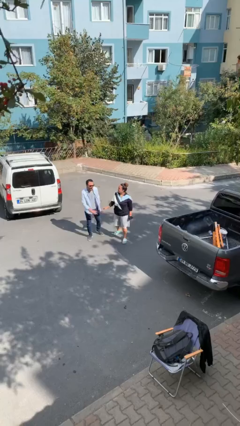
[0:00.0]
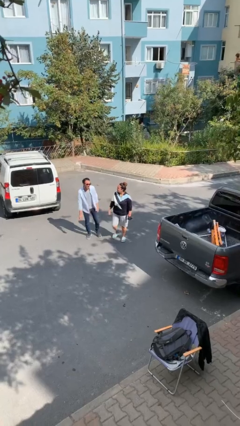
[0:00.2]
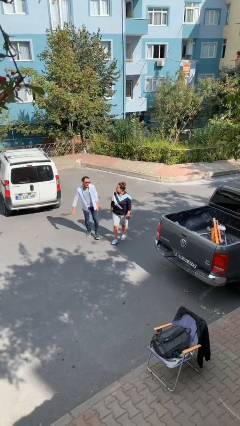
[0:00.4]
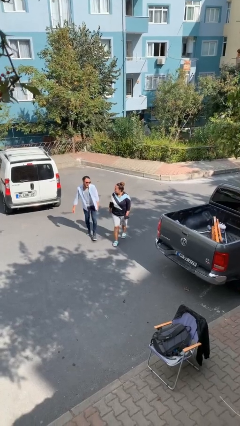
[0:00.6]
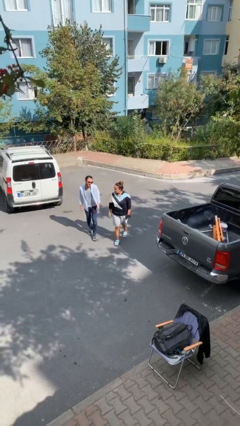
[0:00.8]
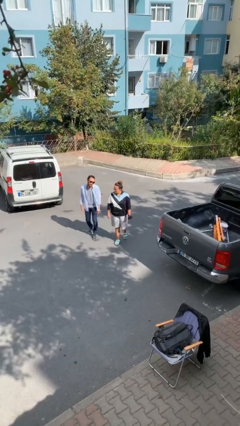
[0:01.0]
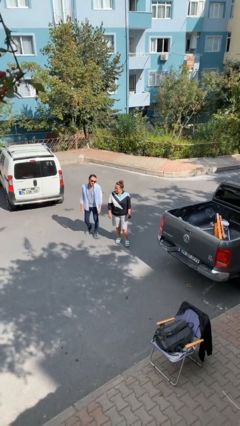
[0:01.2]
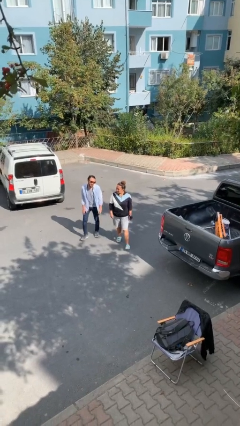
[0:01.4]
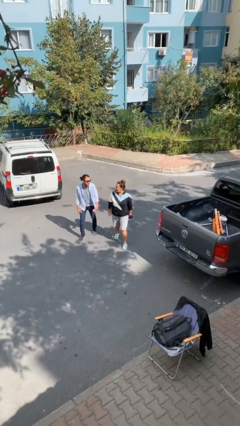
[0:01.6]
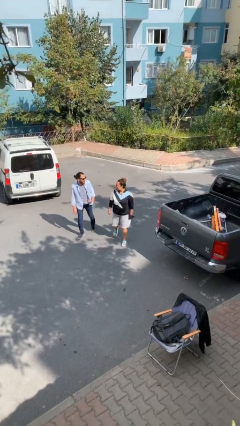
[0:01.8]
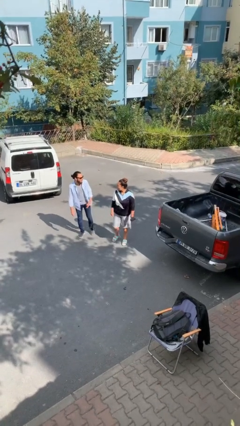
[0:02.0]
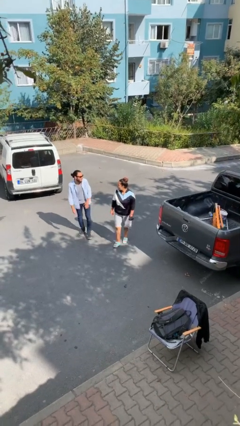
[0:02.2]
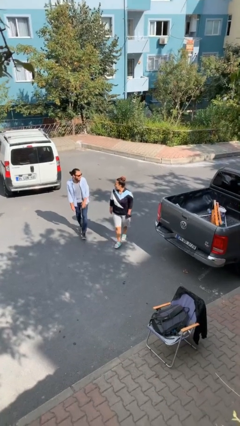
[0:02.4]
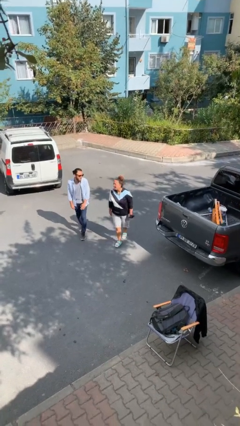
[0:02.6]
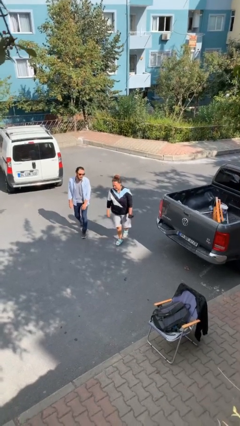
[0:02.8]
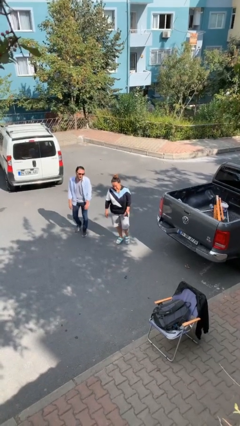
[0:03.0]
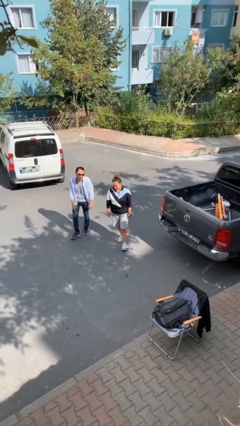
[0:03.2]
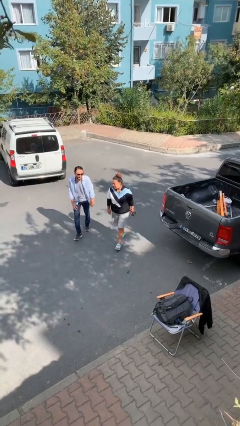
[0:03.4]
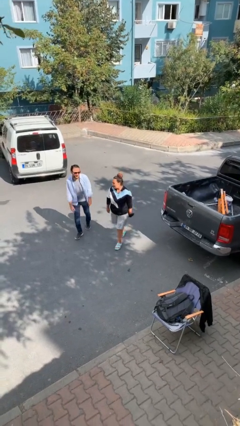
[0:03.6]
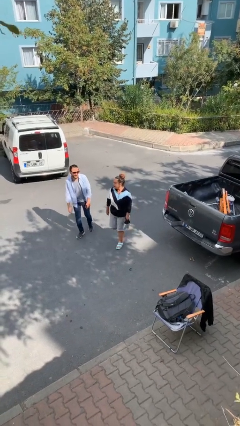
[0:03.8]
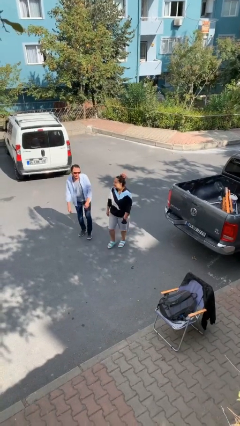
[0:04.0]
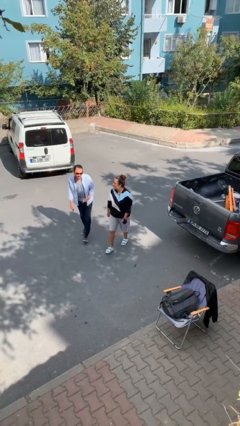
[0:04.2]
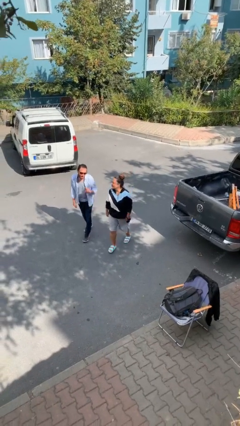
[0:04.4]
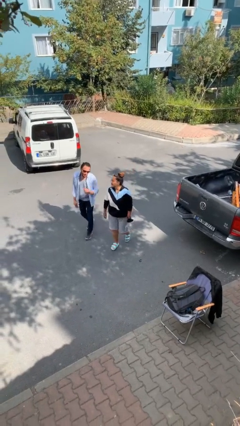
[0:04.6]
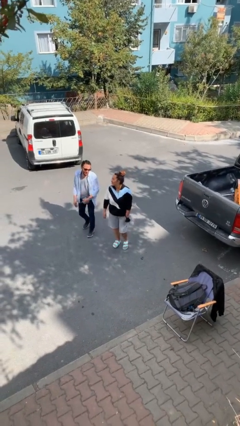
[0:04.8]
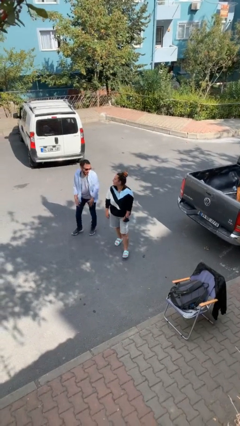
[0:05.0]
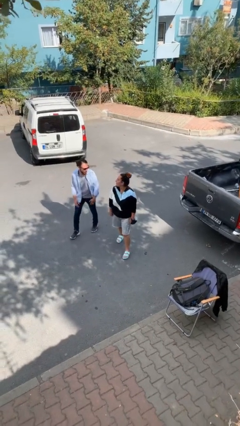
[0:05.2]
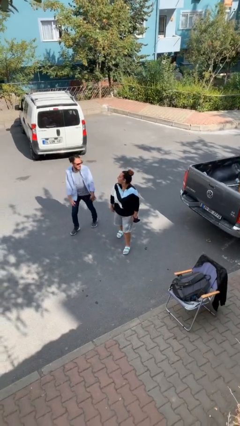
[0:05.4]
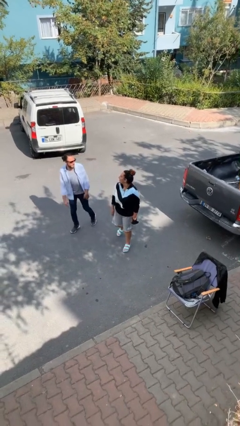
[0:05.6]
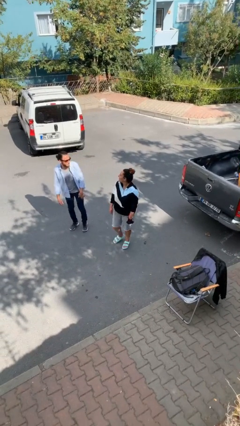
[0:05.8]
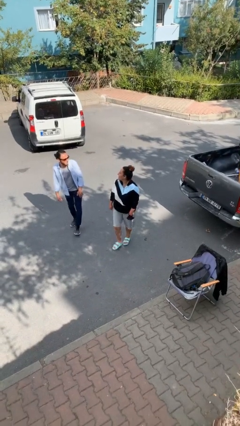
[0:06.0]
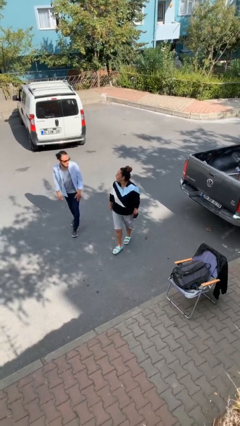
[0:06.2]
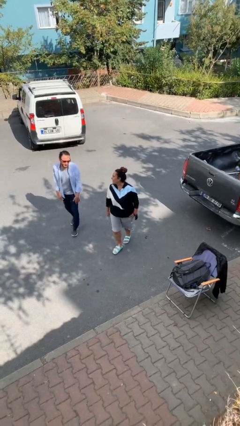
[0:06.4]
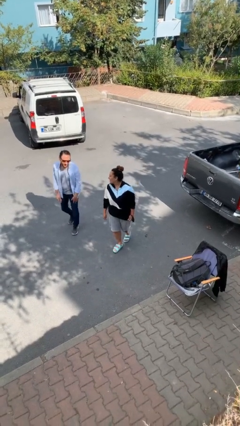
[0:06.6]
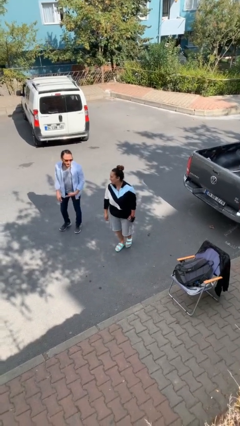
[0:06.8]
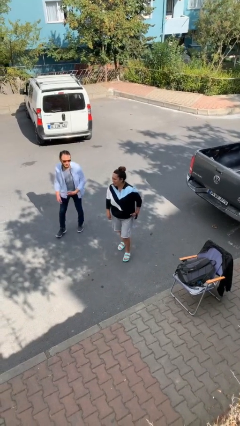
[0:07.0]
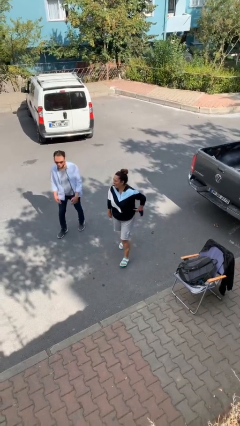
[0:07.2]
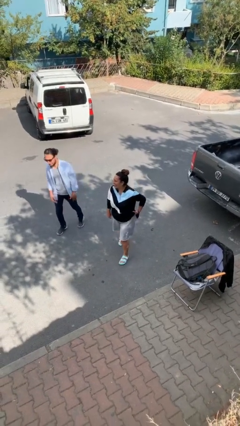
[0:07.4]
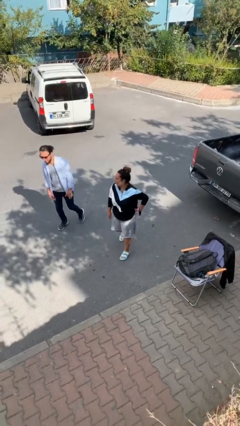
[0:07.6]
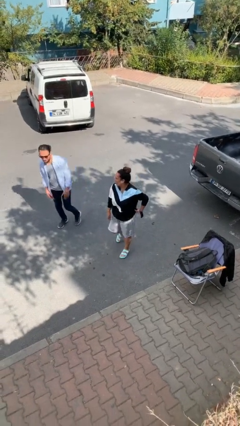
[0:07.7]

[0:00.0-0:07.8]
person talks to person

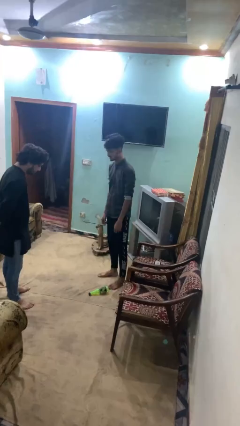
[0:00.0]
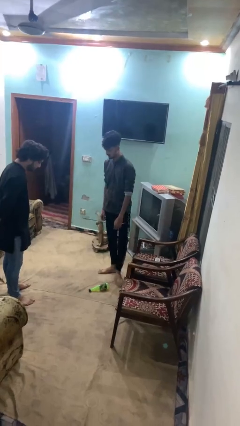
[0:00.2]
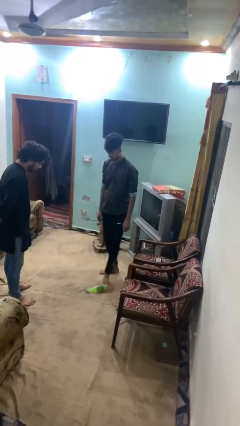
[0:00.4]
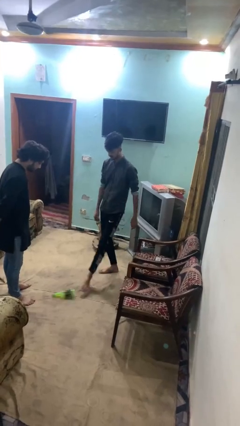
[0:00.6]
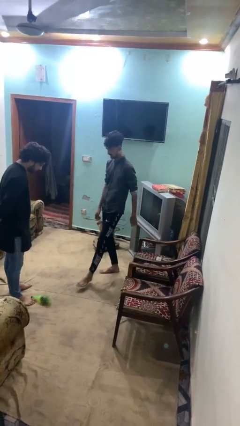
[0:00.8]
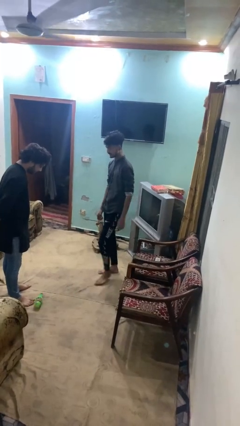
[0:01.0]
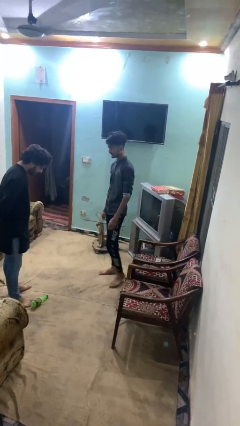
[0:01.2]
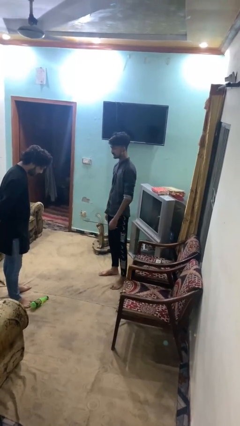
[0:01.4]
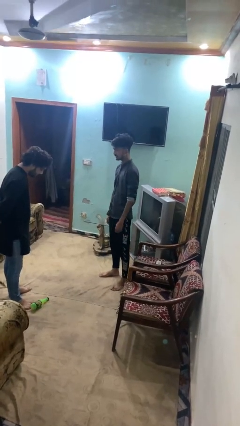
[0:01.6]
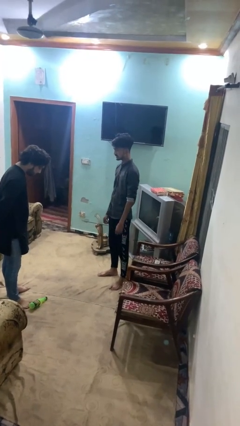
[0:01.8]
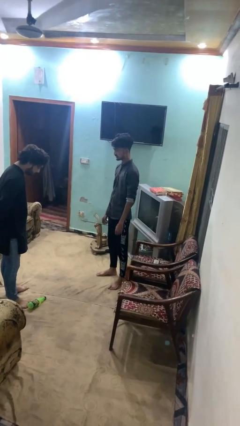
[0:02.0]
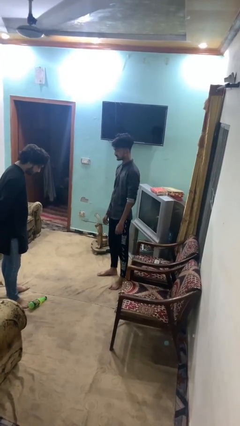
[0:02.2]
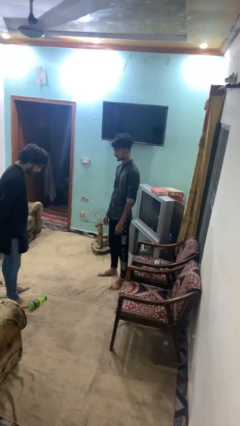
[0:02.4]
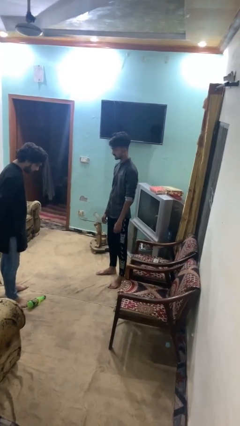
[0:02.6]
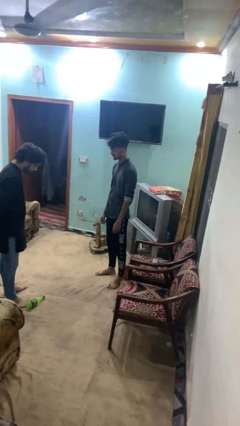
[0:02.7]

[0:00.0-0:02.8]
person kicks object to person

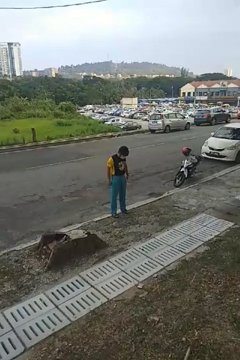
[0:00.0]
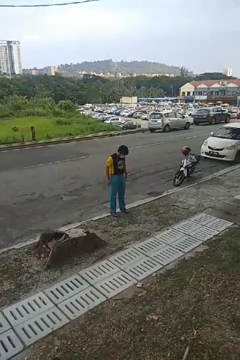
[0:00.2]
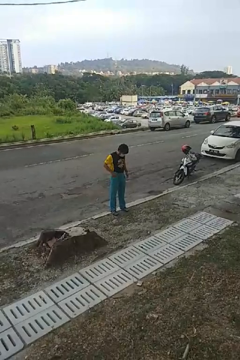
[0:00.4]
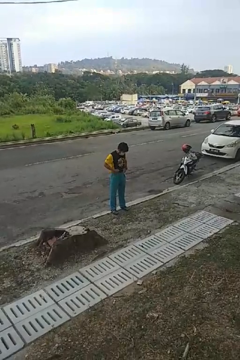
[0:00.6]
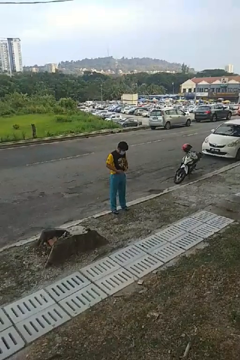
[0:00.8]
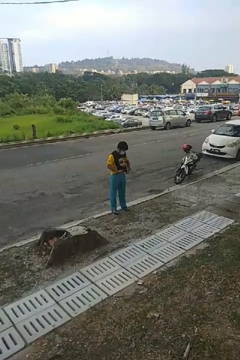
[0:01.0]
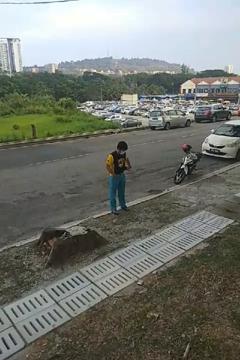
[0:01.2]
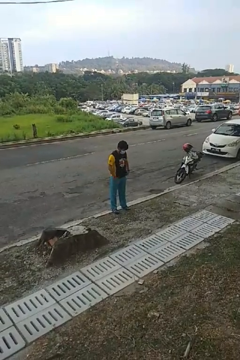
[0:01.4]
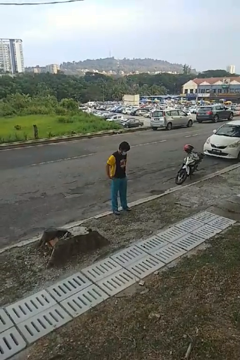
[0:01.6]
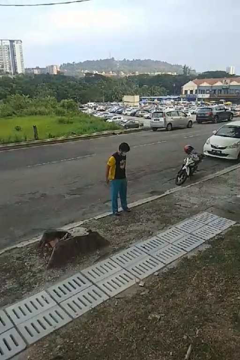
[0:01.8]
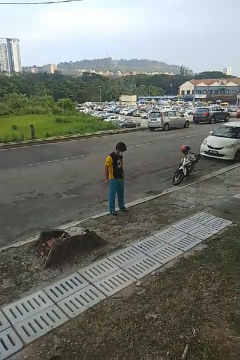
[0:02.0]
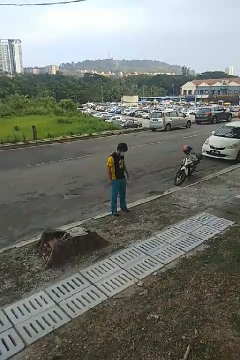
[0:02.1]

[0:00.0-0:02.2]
person untucks shirt

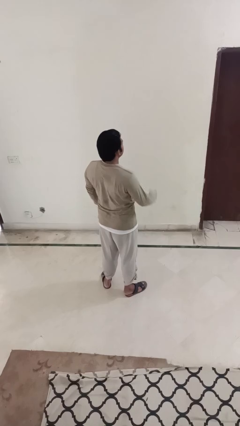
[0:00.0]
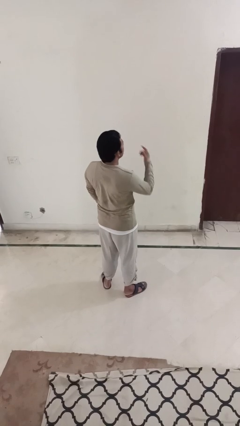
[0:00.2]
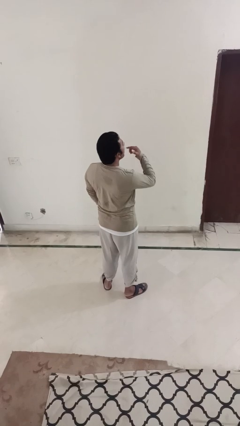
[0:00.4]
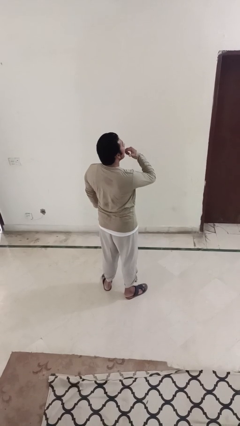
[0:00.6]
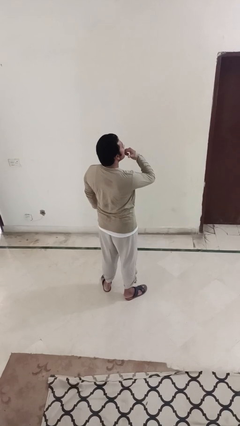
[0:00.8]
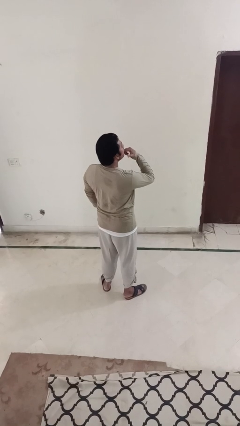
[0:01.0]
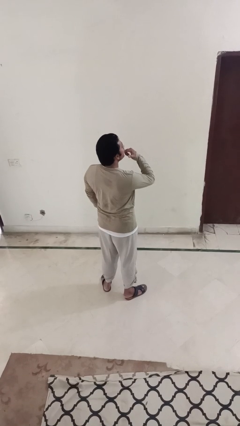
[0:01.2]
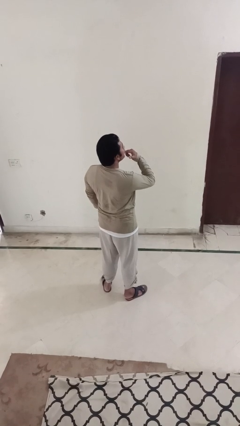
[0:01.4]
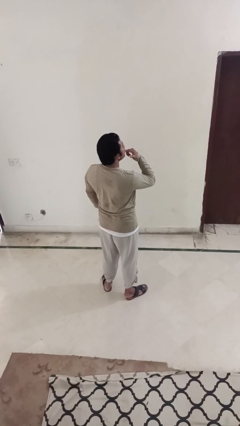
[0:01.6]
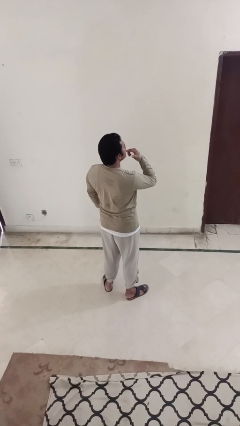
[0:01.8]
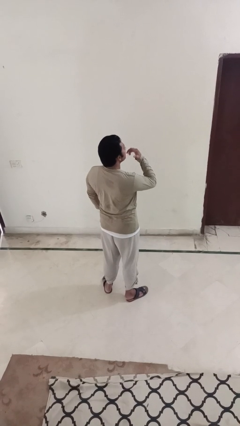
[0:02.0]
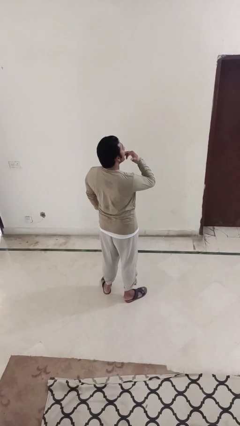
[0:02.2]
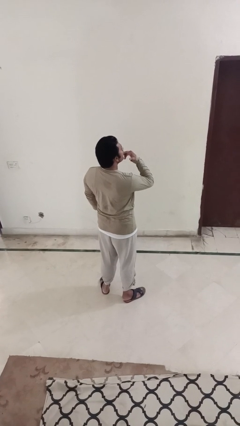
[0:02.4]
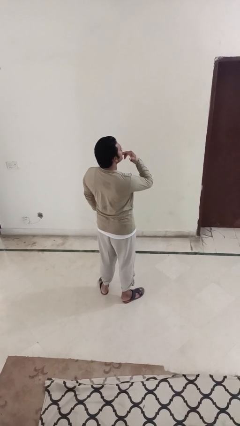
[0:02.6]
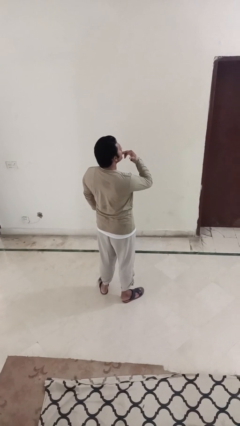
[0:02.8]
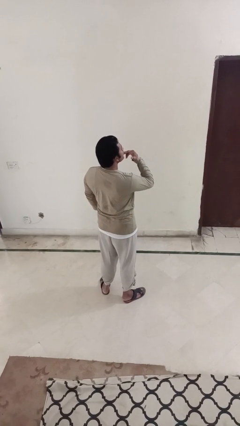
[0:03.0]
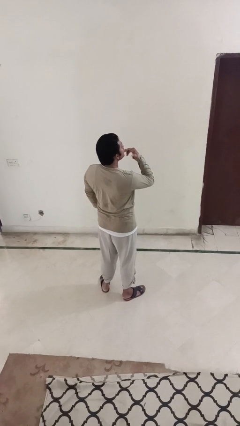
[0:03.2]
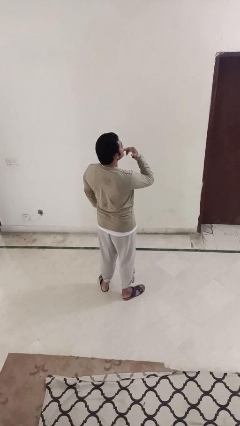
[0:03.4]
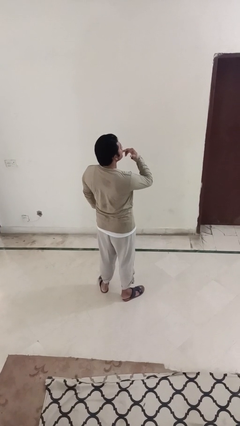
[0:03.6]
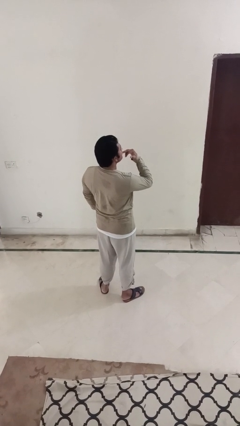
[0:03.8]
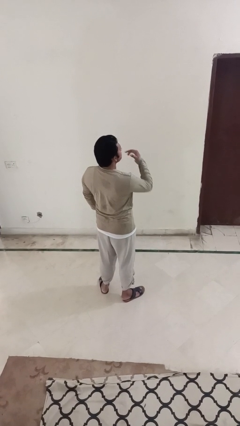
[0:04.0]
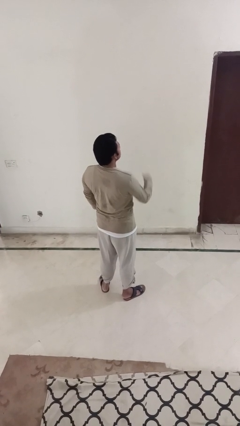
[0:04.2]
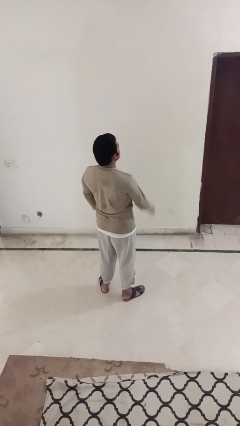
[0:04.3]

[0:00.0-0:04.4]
person licks fingers

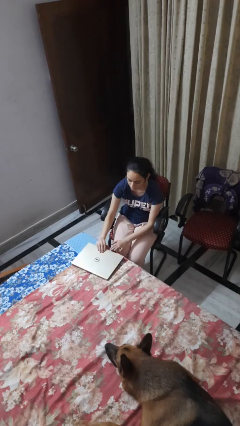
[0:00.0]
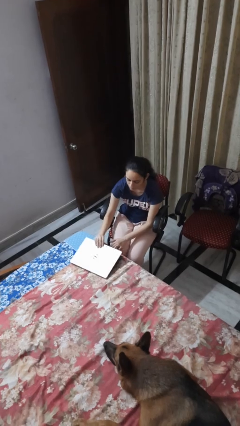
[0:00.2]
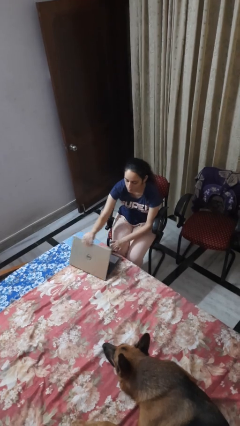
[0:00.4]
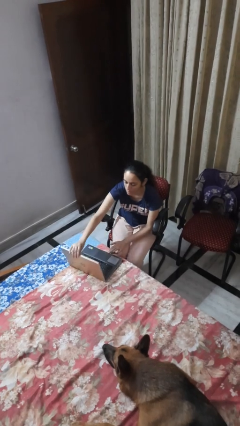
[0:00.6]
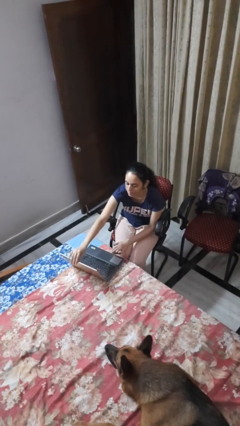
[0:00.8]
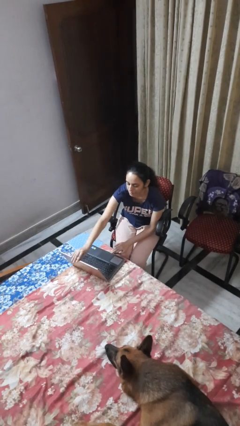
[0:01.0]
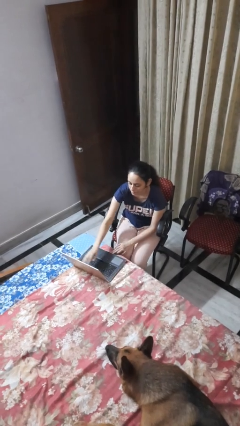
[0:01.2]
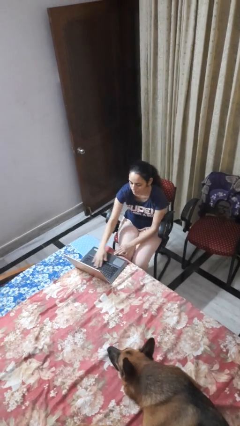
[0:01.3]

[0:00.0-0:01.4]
person opens laptop
